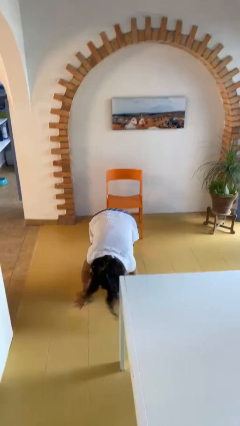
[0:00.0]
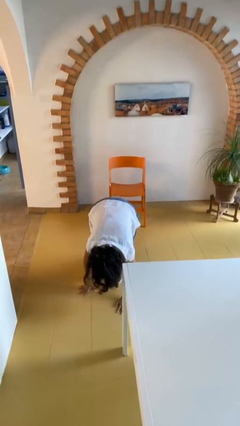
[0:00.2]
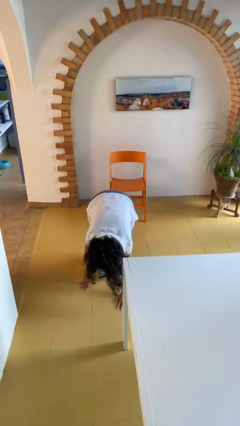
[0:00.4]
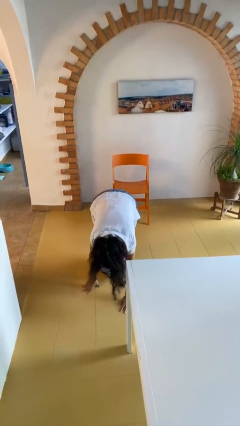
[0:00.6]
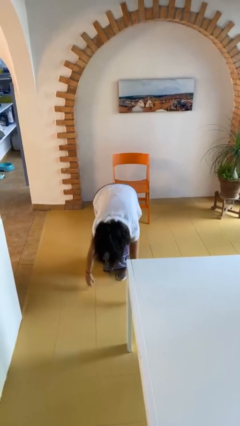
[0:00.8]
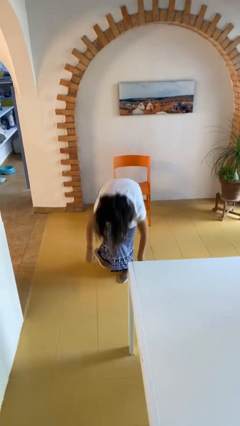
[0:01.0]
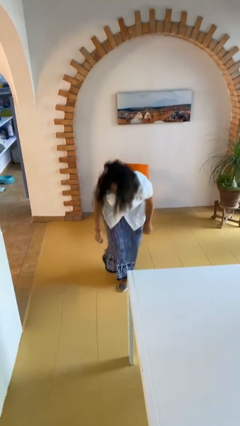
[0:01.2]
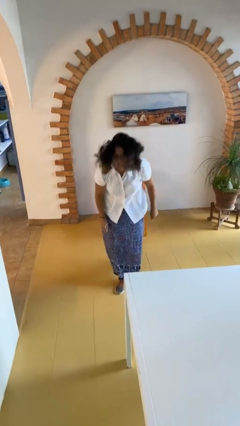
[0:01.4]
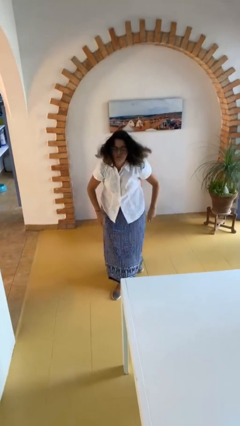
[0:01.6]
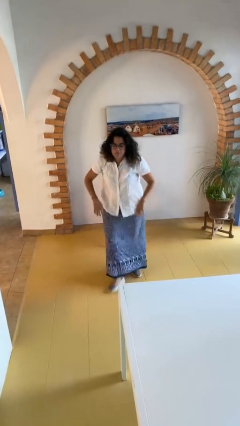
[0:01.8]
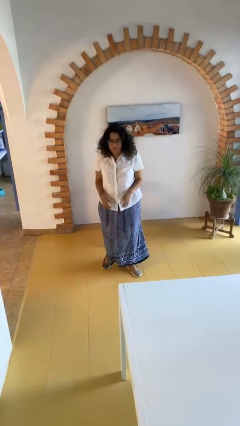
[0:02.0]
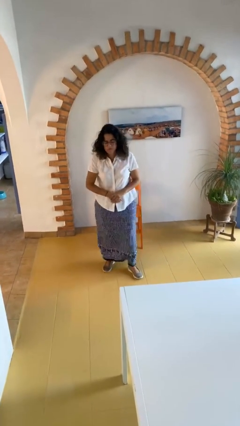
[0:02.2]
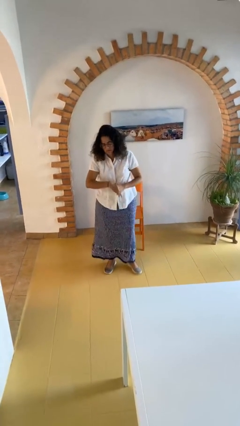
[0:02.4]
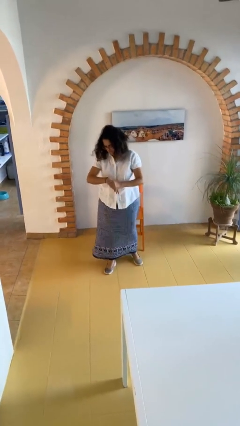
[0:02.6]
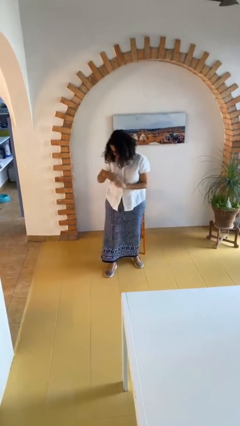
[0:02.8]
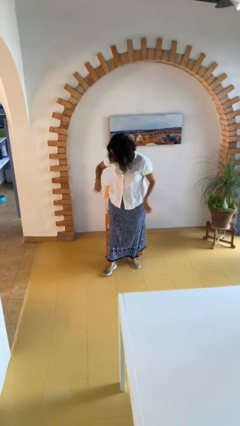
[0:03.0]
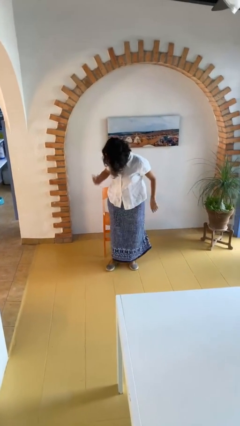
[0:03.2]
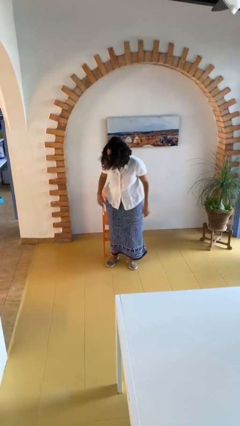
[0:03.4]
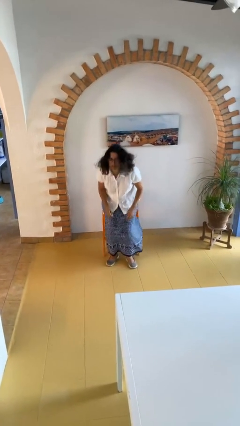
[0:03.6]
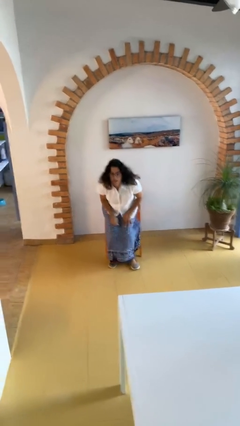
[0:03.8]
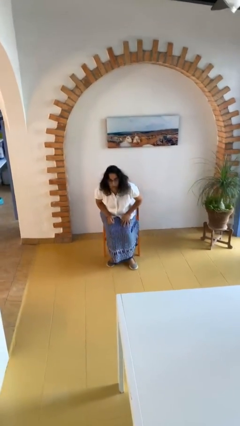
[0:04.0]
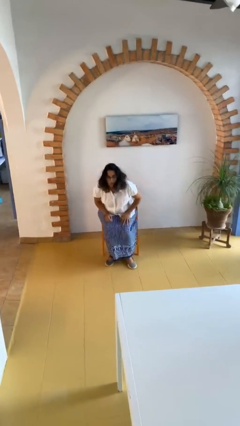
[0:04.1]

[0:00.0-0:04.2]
person stands up from floor

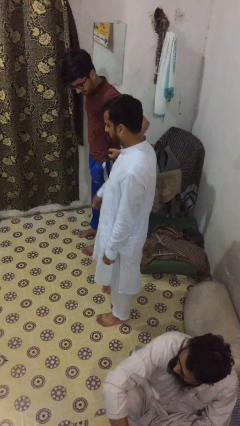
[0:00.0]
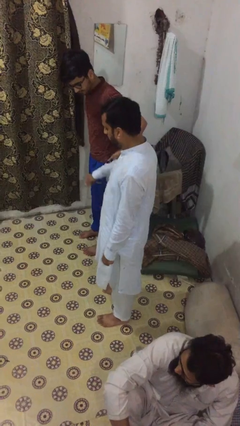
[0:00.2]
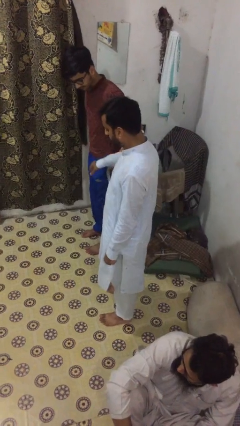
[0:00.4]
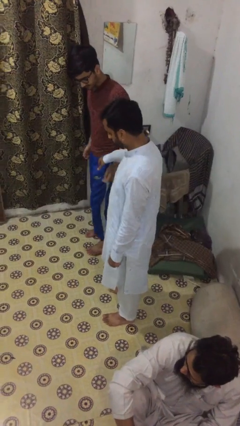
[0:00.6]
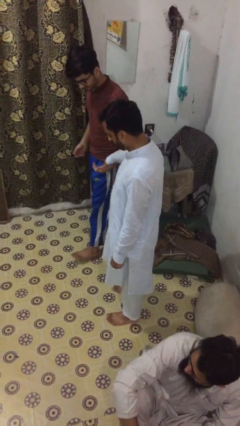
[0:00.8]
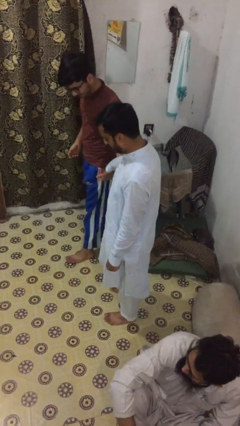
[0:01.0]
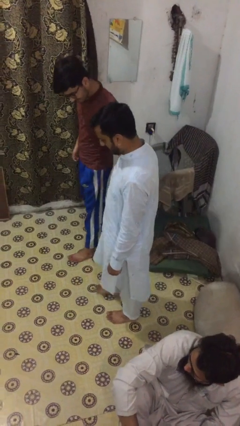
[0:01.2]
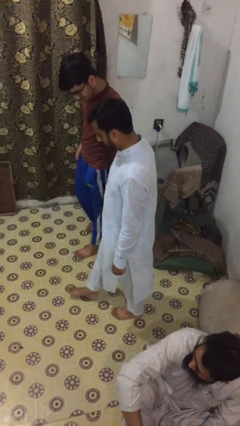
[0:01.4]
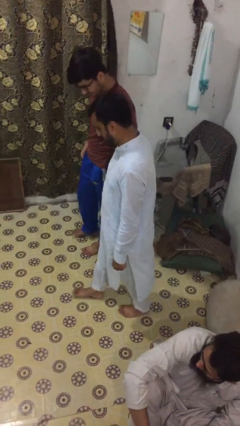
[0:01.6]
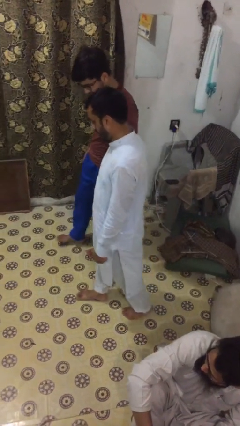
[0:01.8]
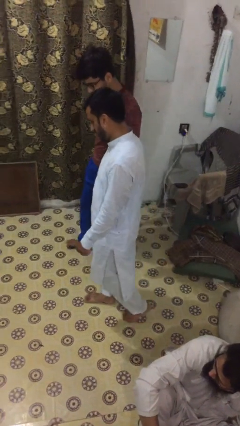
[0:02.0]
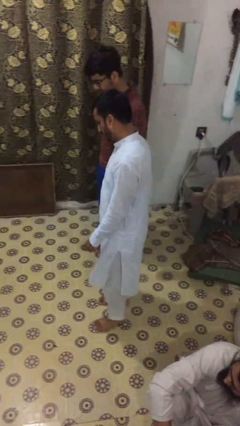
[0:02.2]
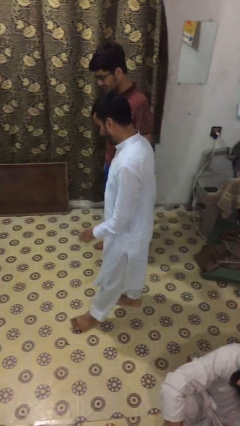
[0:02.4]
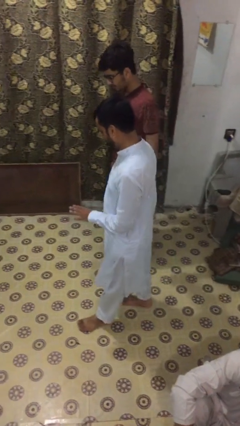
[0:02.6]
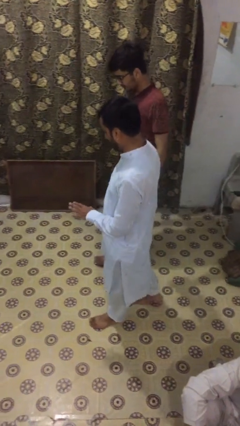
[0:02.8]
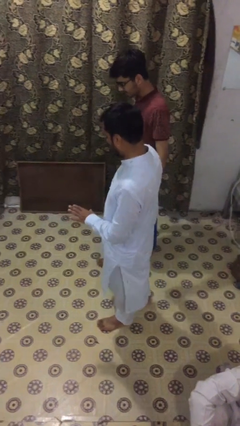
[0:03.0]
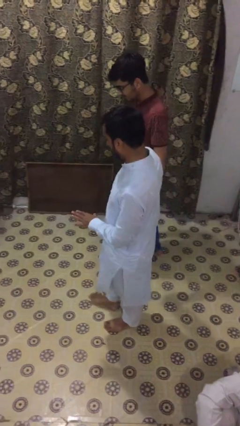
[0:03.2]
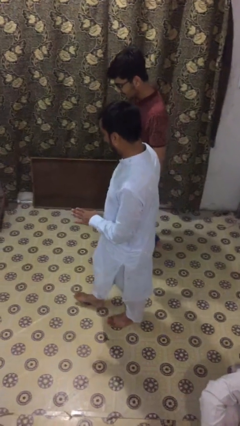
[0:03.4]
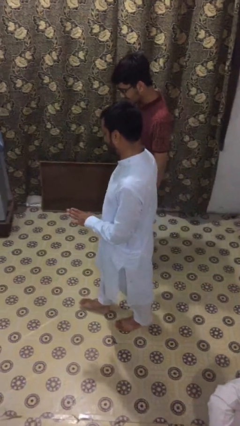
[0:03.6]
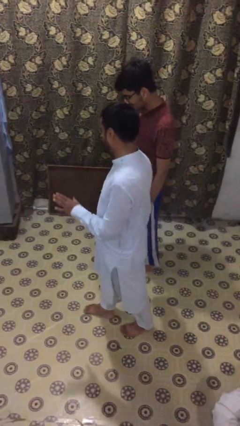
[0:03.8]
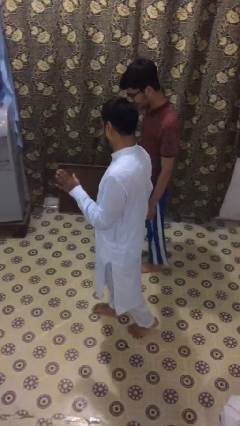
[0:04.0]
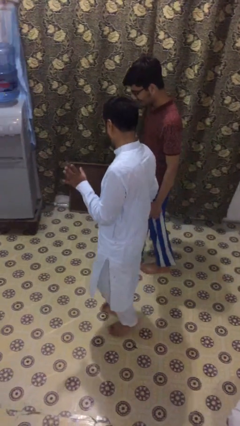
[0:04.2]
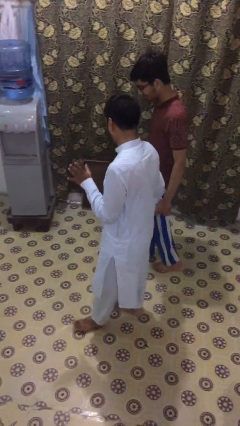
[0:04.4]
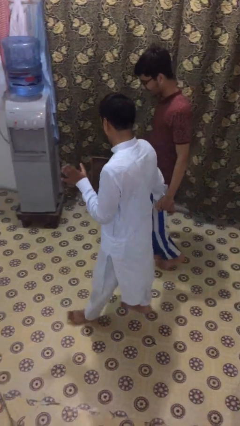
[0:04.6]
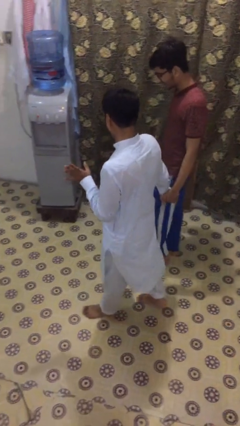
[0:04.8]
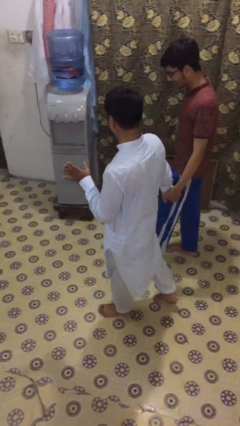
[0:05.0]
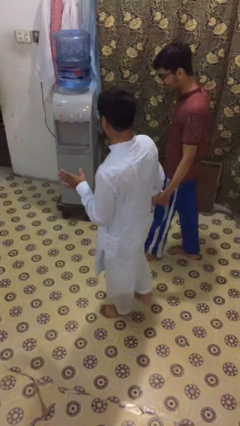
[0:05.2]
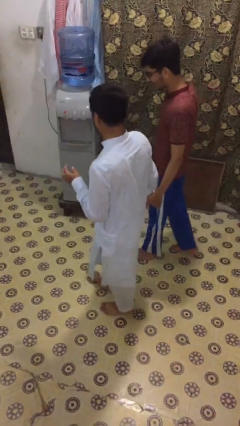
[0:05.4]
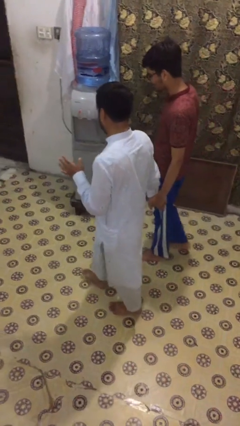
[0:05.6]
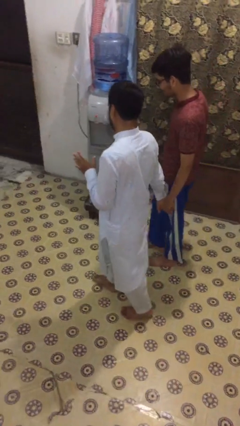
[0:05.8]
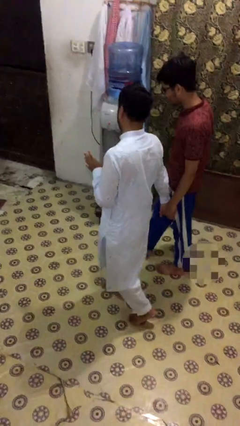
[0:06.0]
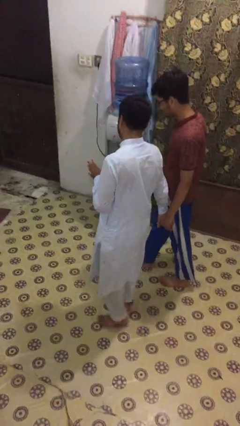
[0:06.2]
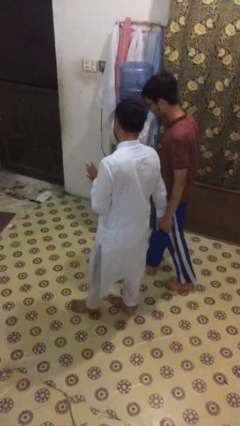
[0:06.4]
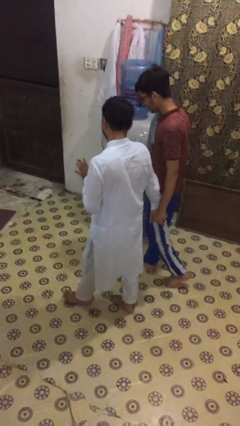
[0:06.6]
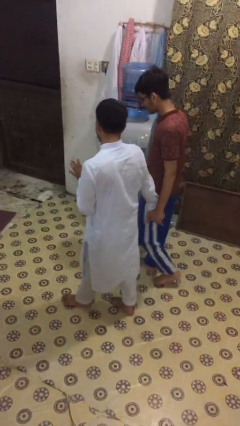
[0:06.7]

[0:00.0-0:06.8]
person holds hand

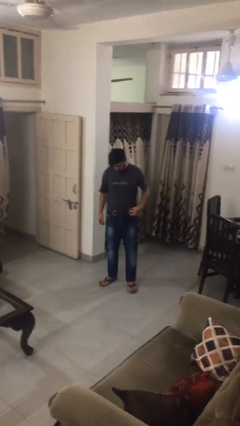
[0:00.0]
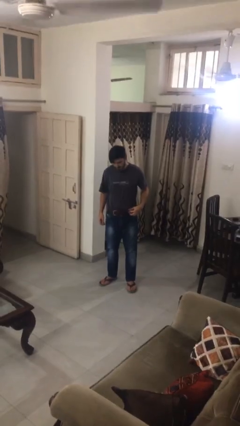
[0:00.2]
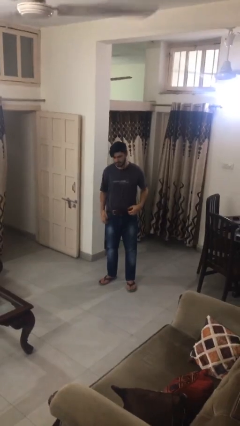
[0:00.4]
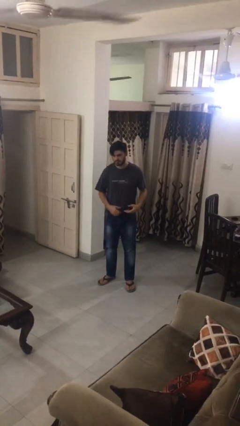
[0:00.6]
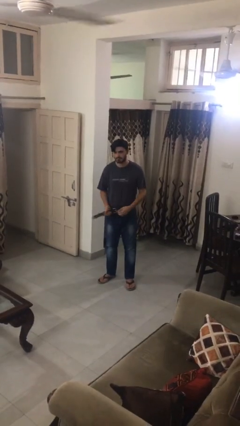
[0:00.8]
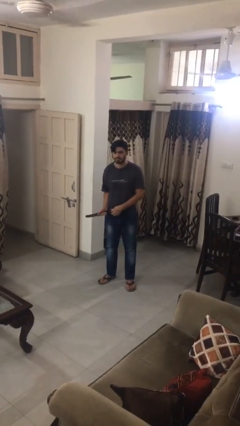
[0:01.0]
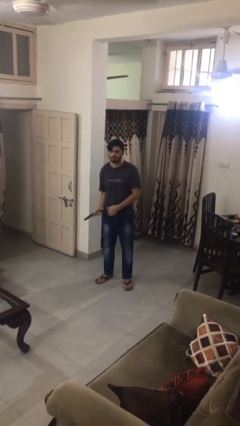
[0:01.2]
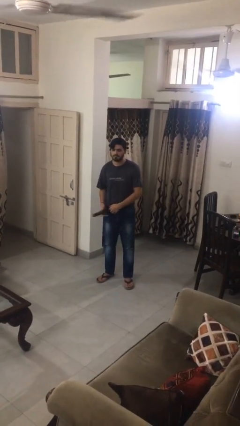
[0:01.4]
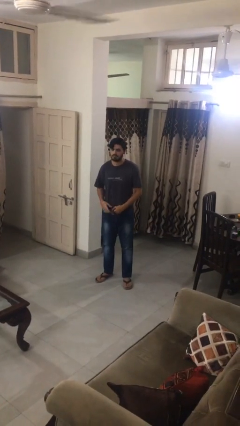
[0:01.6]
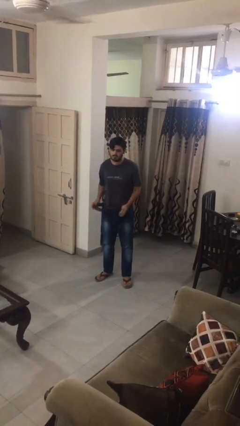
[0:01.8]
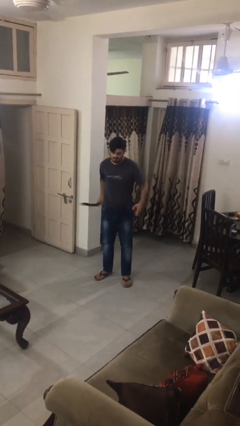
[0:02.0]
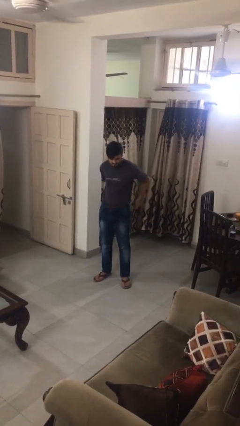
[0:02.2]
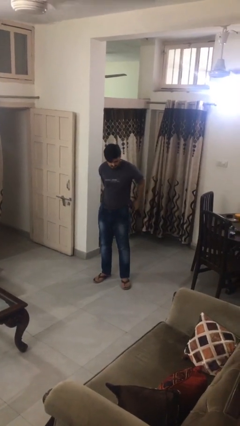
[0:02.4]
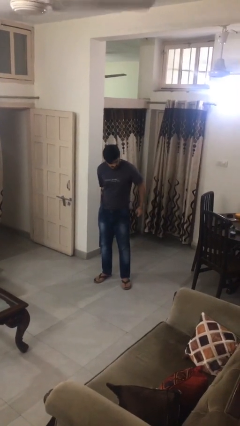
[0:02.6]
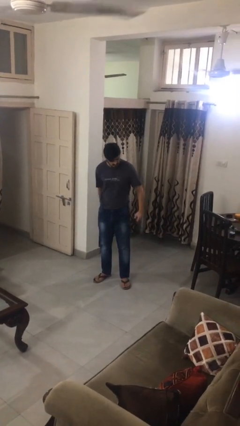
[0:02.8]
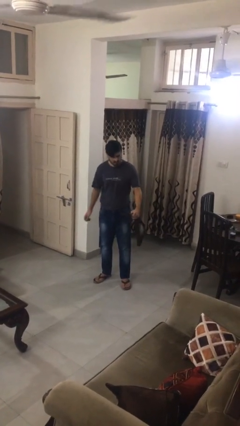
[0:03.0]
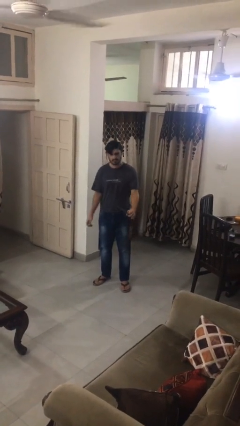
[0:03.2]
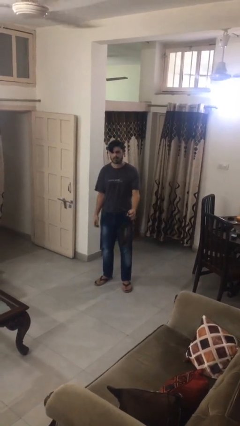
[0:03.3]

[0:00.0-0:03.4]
person takes off belt

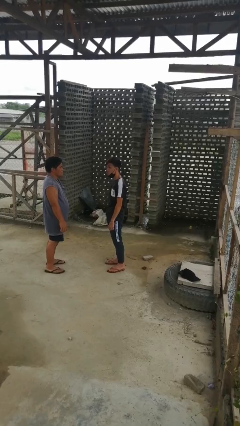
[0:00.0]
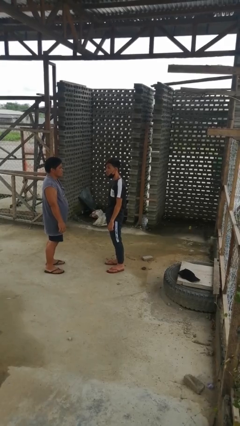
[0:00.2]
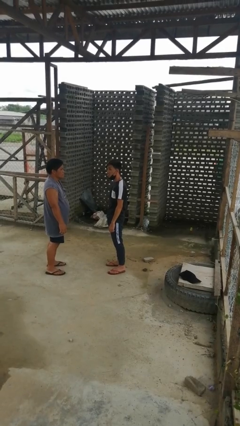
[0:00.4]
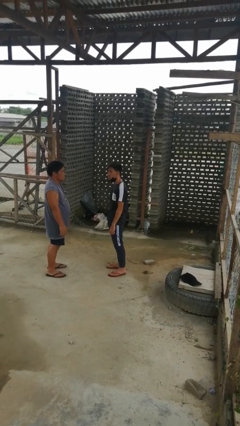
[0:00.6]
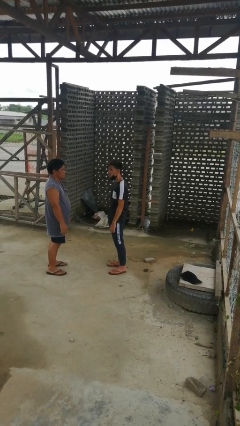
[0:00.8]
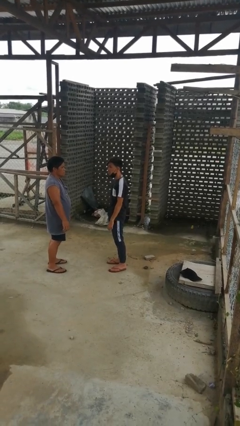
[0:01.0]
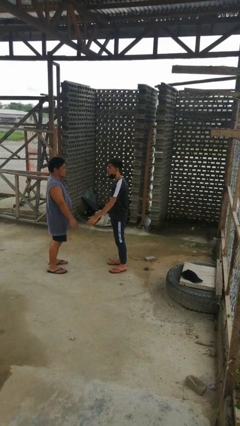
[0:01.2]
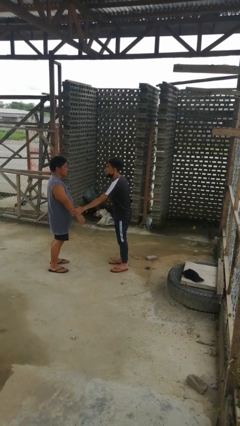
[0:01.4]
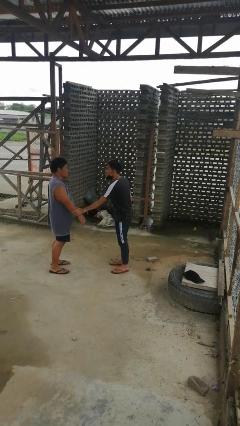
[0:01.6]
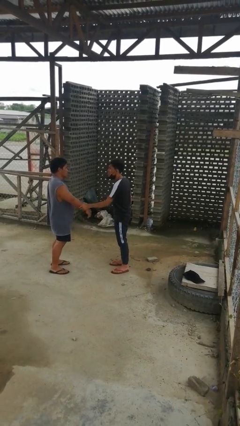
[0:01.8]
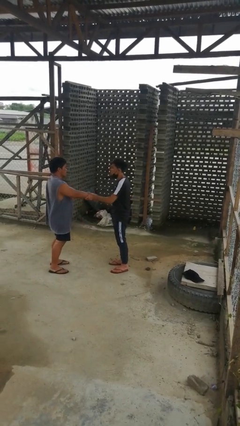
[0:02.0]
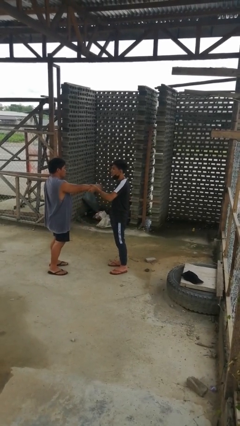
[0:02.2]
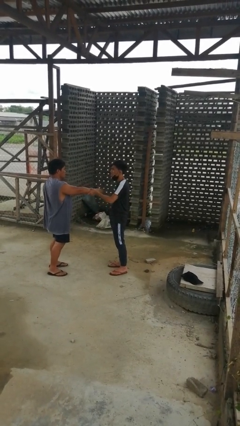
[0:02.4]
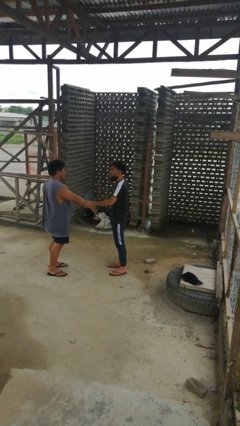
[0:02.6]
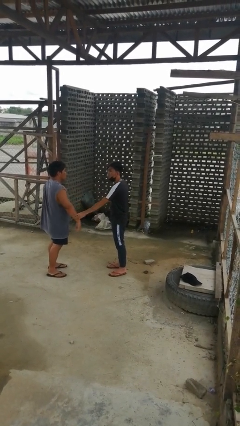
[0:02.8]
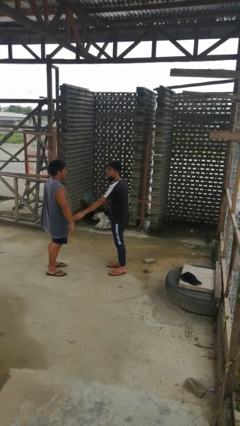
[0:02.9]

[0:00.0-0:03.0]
person grabs person by forearm
